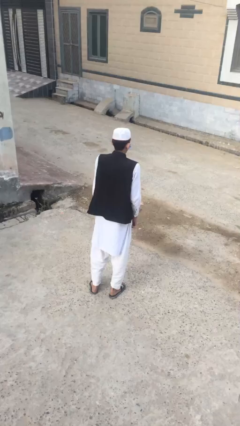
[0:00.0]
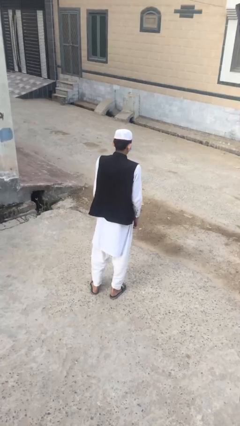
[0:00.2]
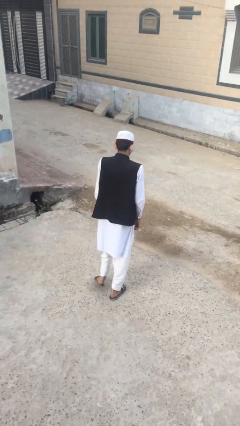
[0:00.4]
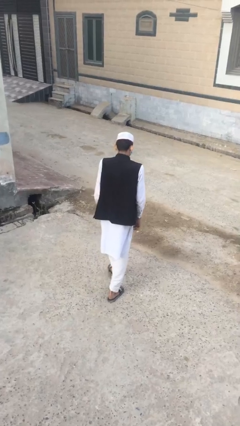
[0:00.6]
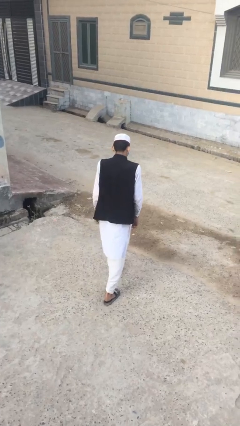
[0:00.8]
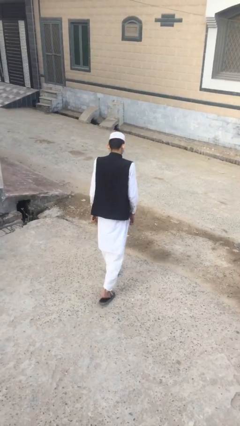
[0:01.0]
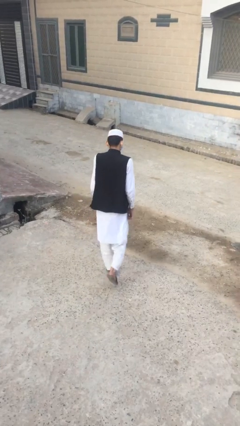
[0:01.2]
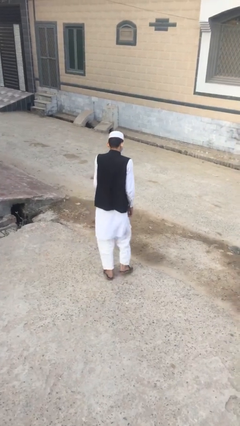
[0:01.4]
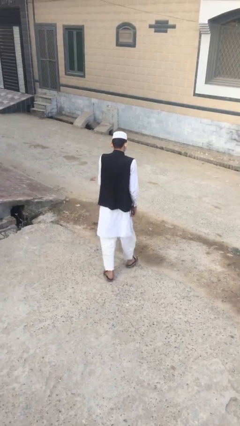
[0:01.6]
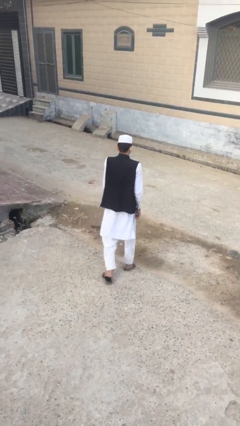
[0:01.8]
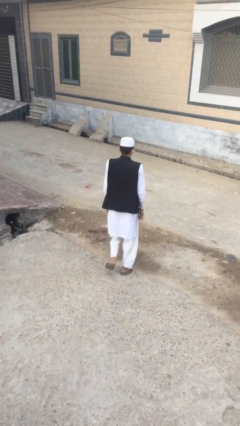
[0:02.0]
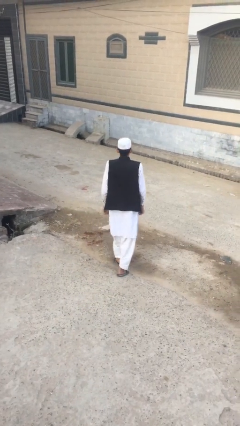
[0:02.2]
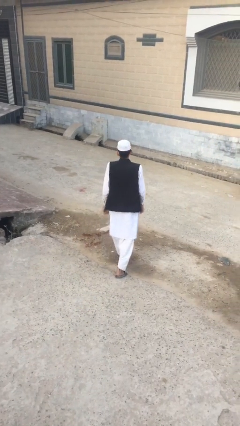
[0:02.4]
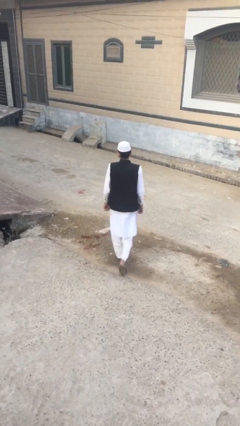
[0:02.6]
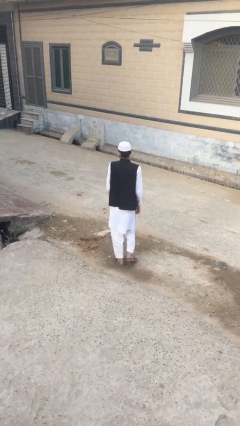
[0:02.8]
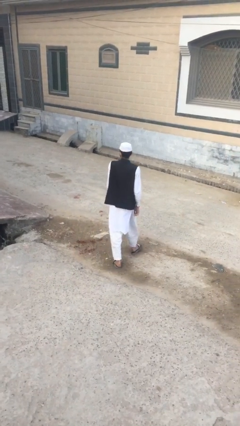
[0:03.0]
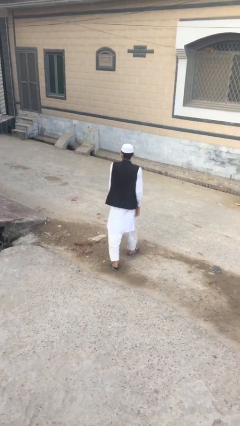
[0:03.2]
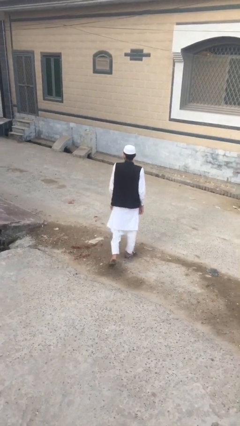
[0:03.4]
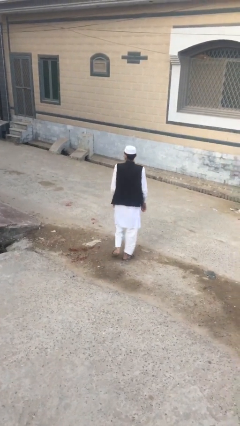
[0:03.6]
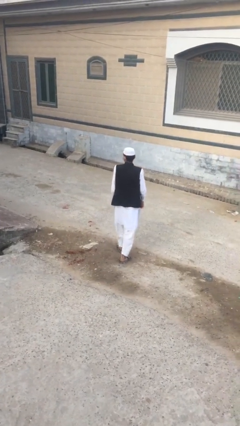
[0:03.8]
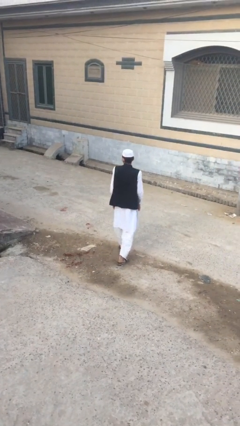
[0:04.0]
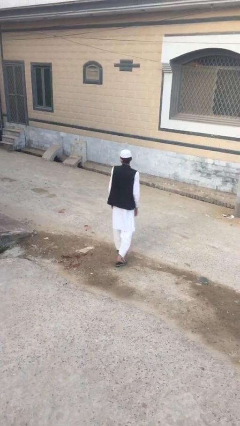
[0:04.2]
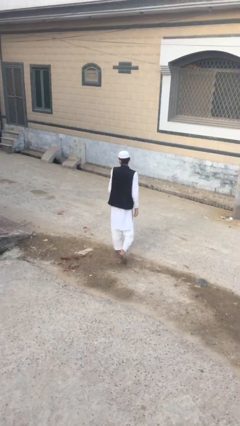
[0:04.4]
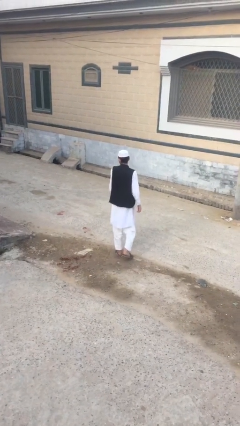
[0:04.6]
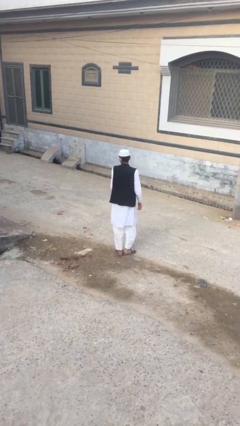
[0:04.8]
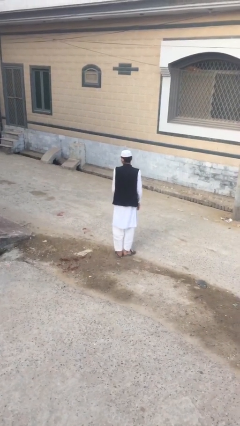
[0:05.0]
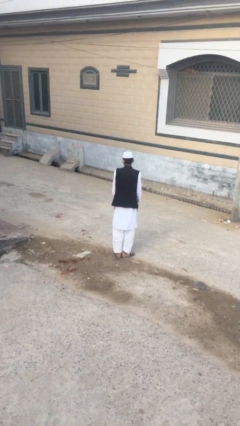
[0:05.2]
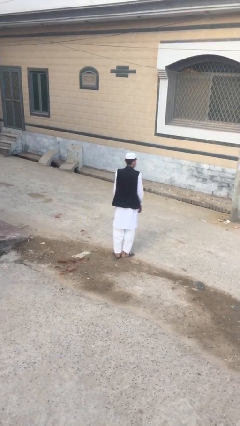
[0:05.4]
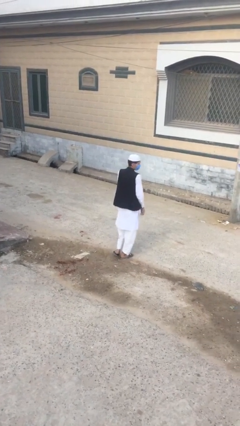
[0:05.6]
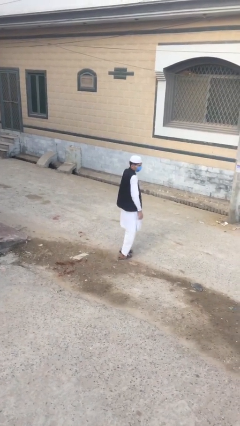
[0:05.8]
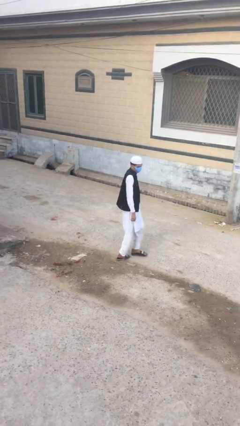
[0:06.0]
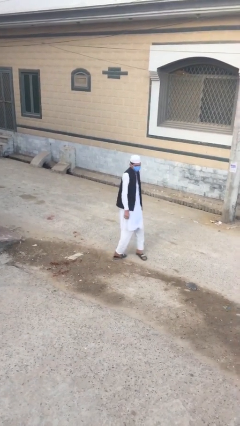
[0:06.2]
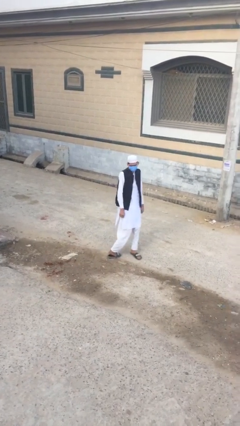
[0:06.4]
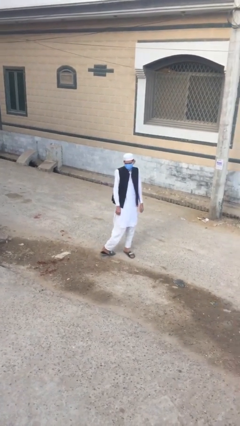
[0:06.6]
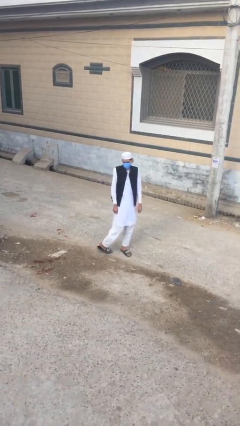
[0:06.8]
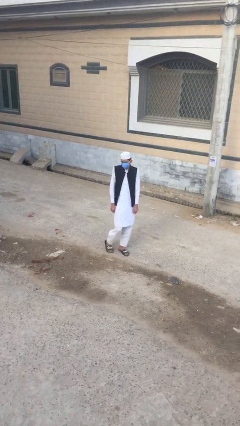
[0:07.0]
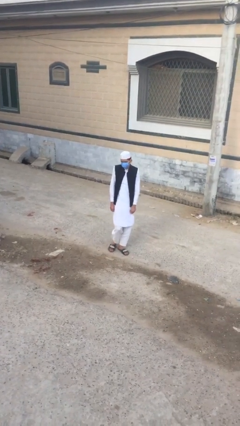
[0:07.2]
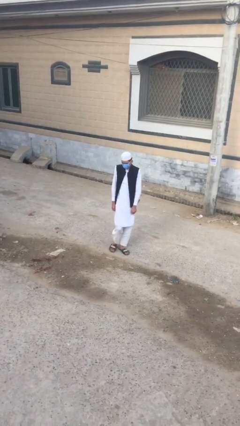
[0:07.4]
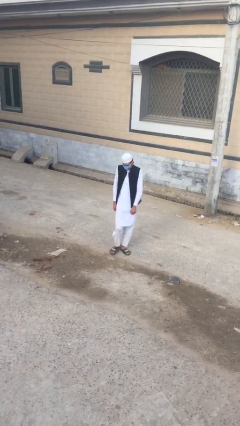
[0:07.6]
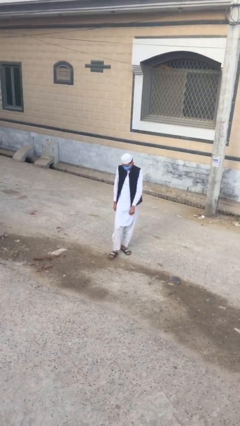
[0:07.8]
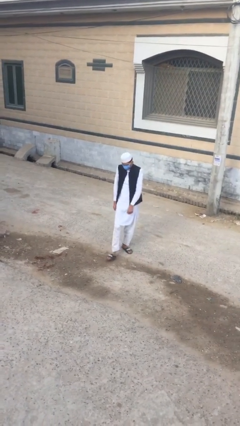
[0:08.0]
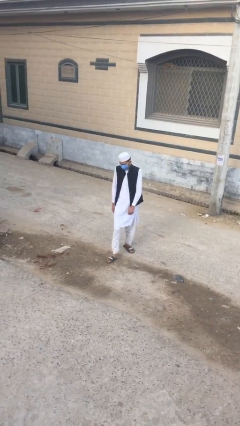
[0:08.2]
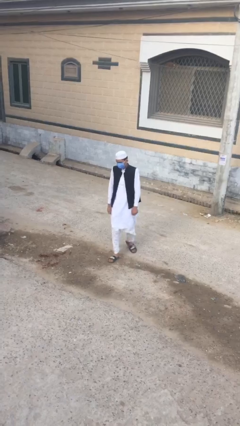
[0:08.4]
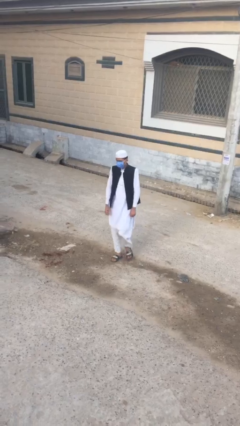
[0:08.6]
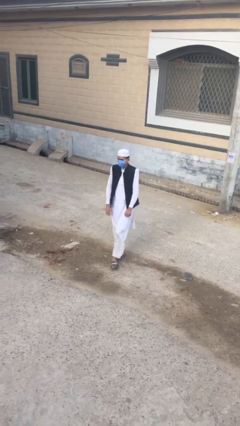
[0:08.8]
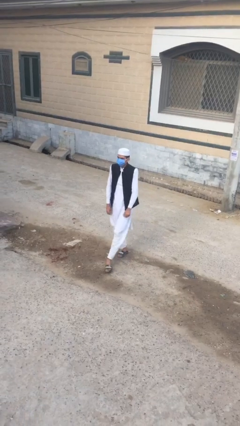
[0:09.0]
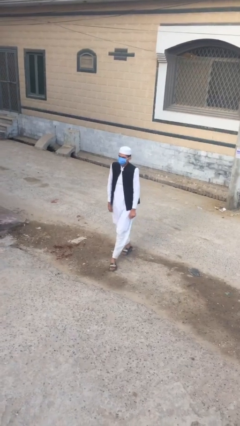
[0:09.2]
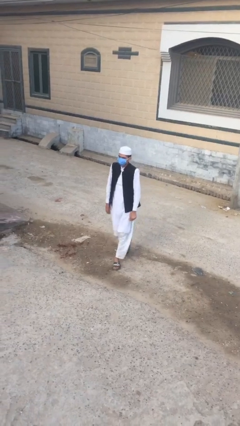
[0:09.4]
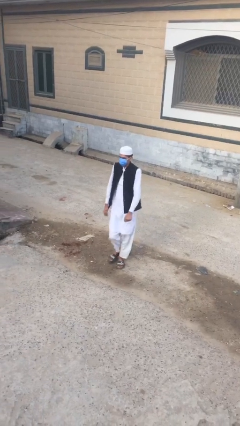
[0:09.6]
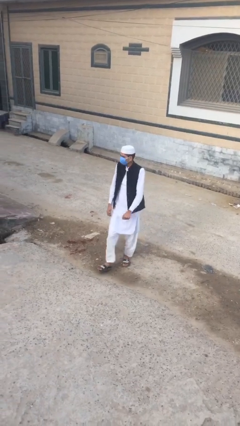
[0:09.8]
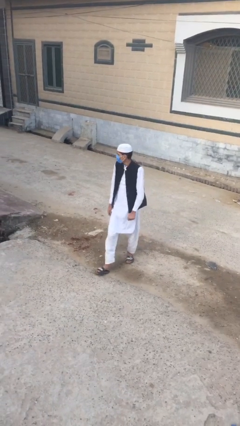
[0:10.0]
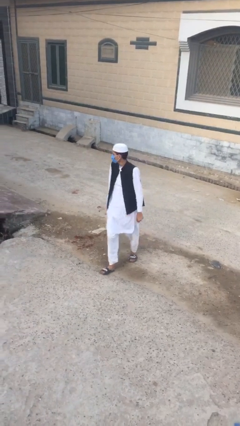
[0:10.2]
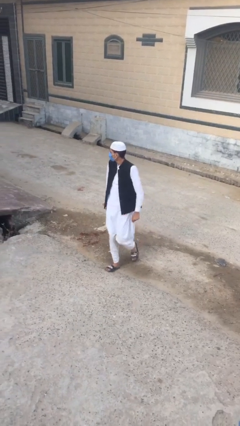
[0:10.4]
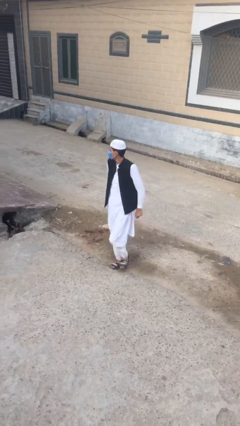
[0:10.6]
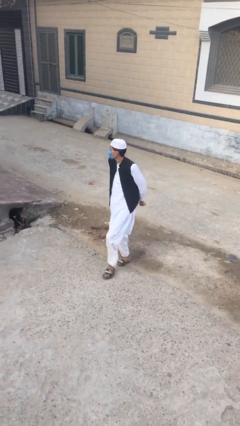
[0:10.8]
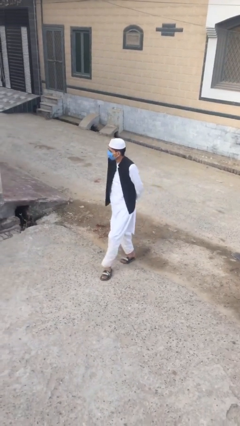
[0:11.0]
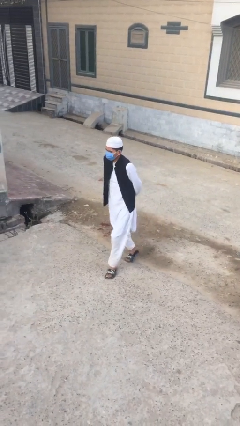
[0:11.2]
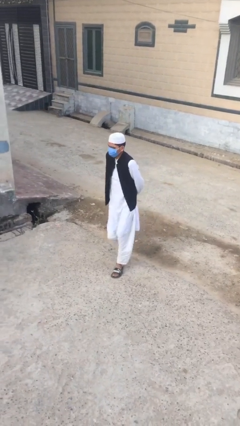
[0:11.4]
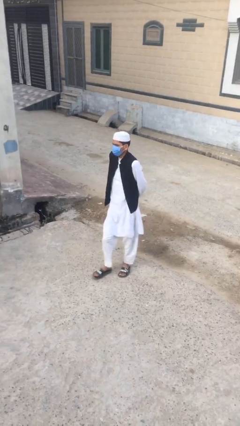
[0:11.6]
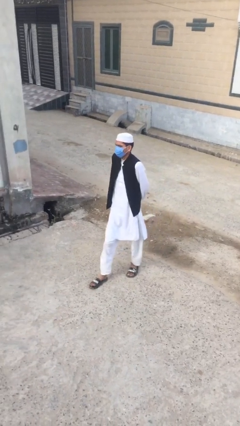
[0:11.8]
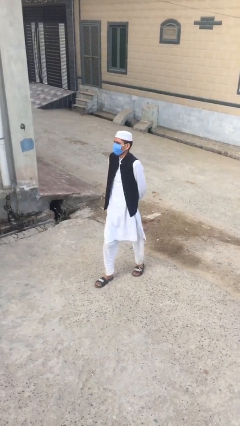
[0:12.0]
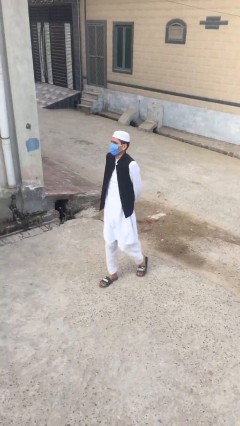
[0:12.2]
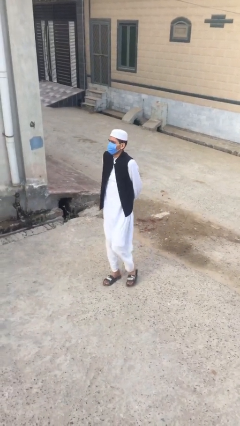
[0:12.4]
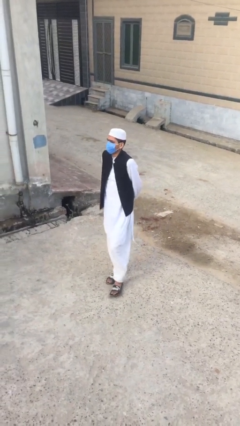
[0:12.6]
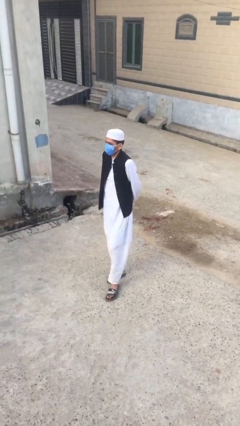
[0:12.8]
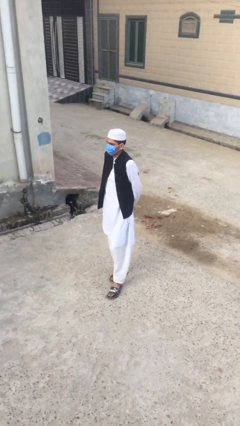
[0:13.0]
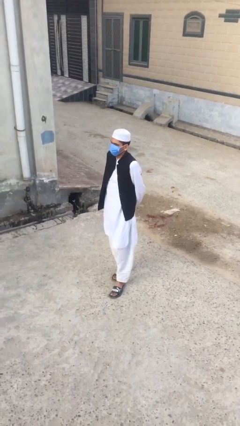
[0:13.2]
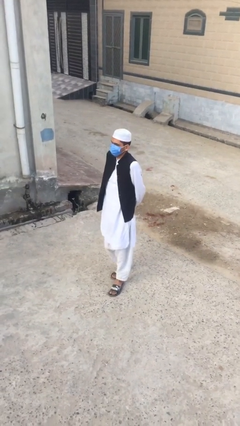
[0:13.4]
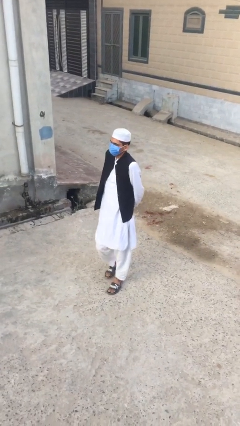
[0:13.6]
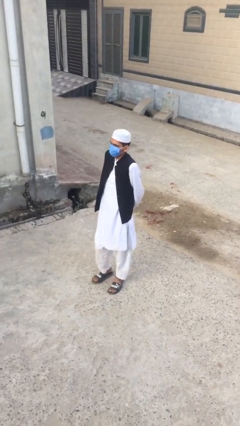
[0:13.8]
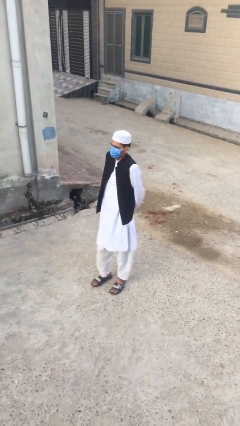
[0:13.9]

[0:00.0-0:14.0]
person walks

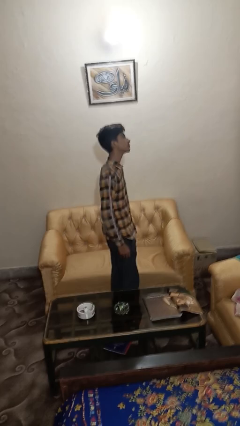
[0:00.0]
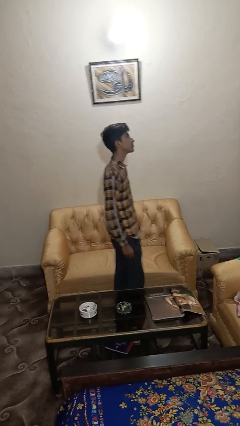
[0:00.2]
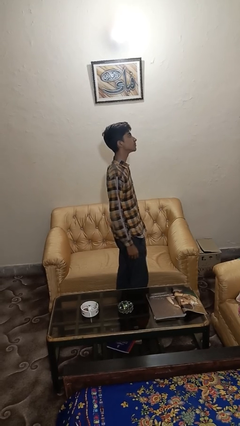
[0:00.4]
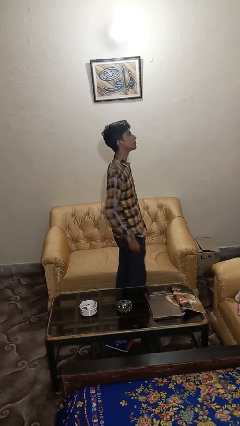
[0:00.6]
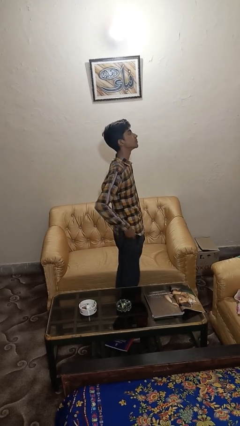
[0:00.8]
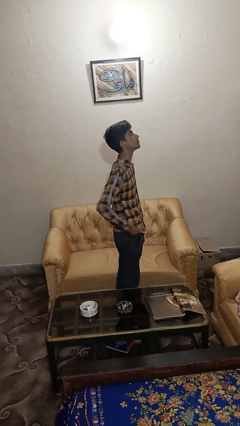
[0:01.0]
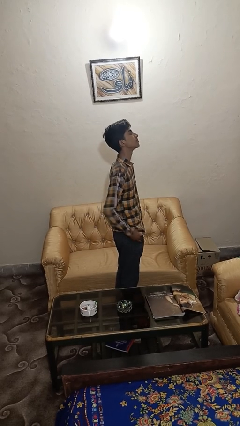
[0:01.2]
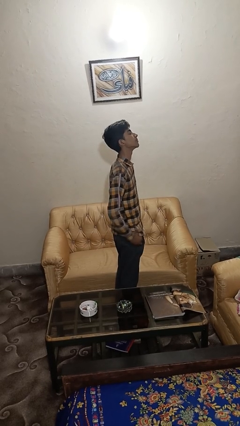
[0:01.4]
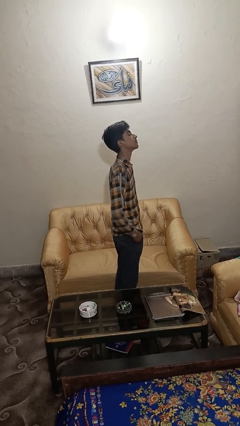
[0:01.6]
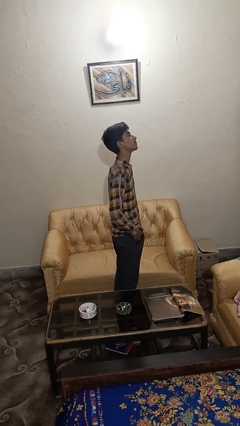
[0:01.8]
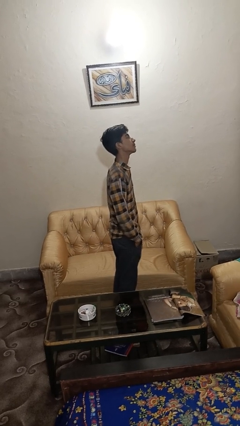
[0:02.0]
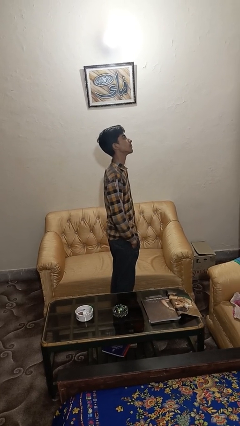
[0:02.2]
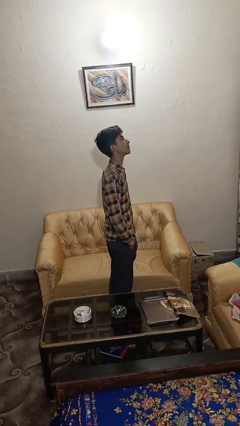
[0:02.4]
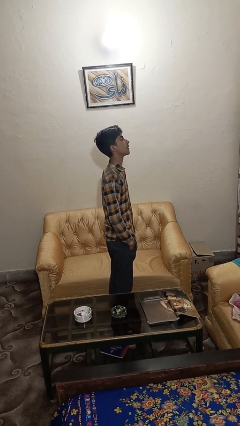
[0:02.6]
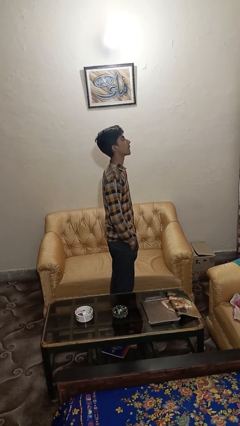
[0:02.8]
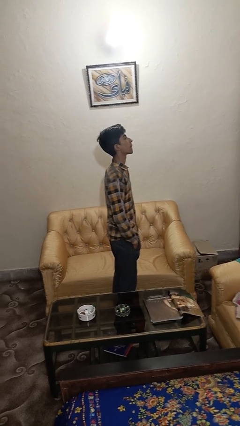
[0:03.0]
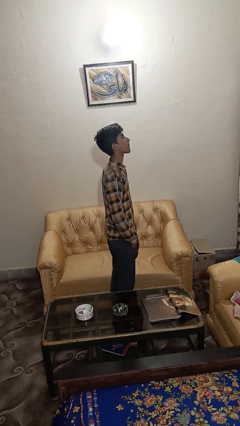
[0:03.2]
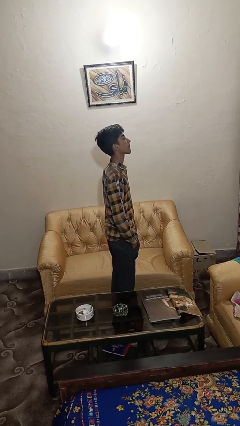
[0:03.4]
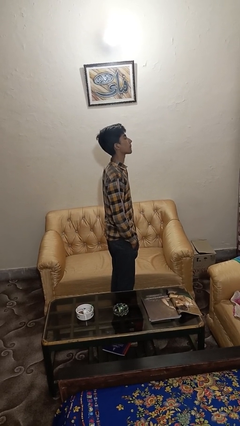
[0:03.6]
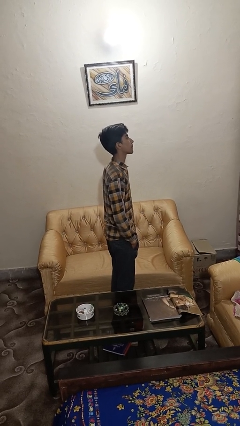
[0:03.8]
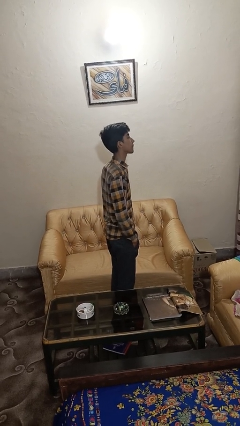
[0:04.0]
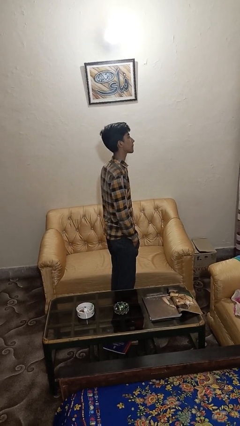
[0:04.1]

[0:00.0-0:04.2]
person puts hands in back pockets

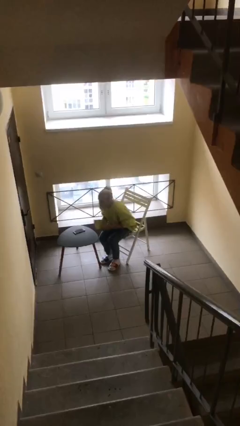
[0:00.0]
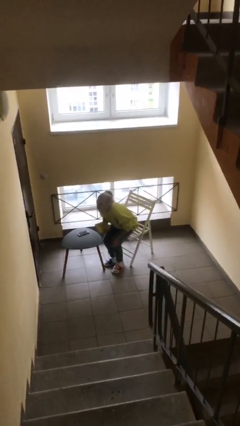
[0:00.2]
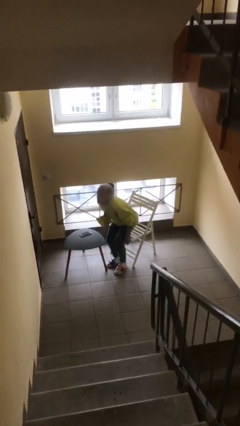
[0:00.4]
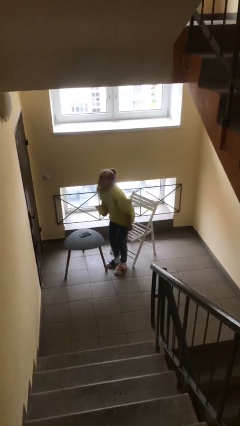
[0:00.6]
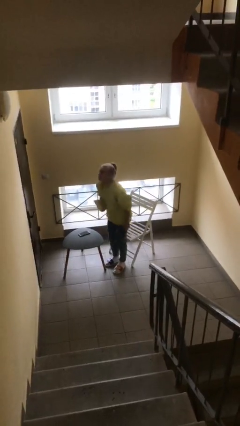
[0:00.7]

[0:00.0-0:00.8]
person stands up
